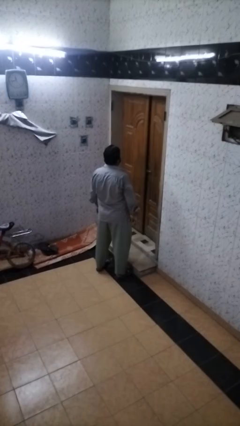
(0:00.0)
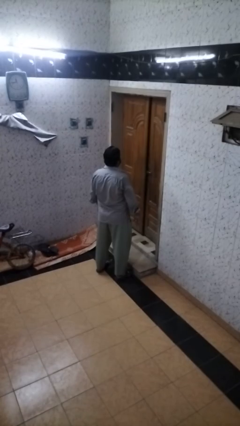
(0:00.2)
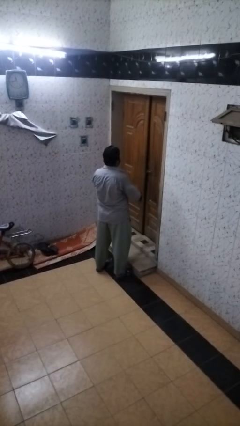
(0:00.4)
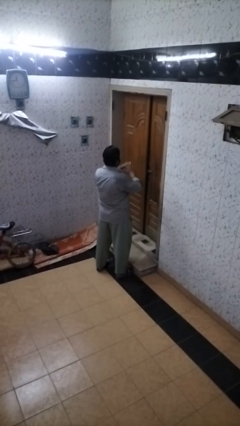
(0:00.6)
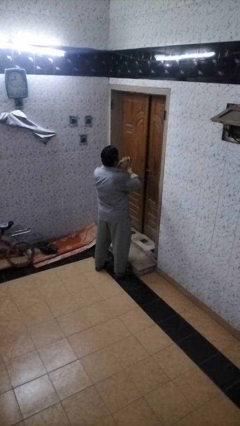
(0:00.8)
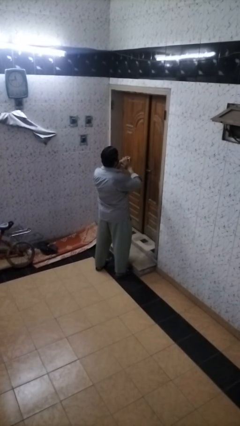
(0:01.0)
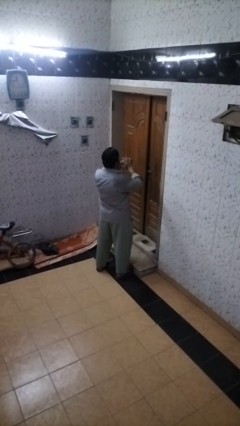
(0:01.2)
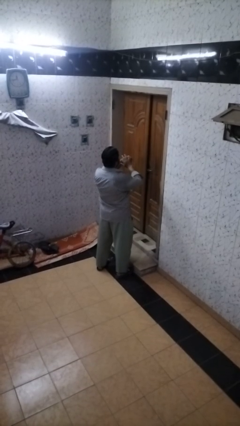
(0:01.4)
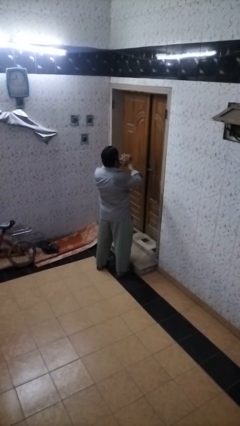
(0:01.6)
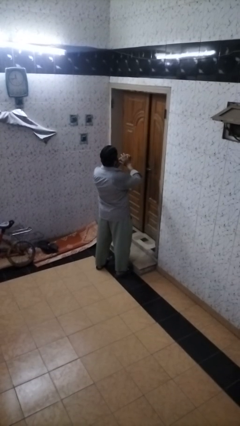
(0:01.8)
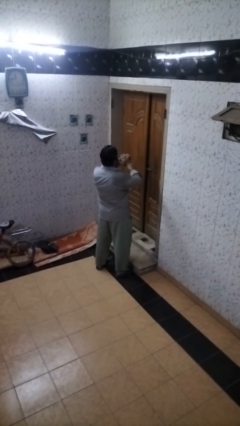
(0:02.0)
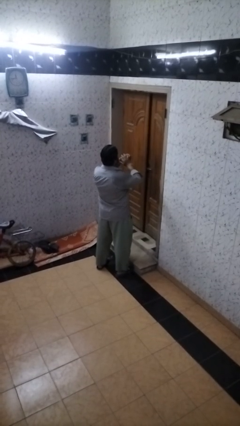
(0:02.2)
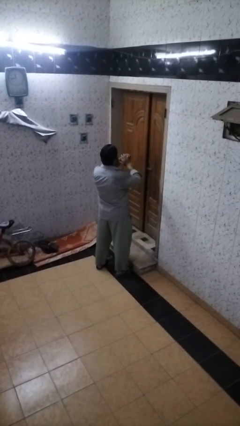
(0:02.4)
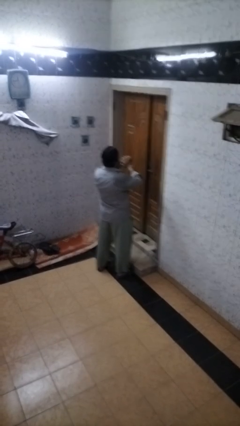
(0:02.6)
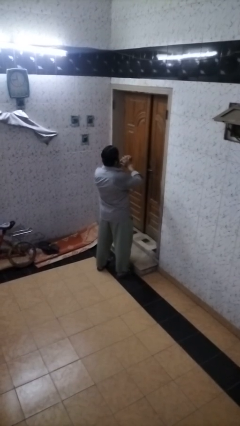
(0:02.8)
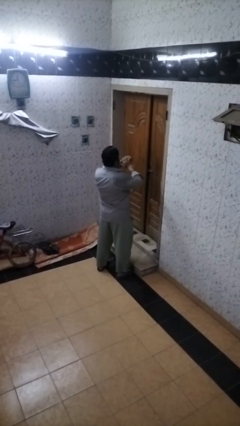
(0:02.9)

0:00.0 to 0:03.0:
person puts on ring

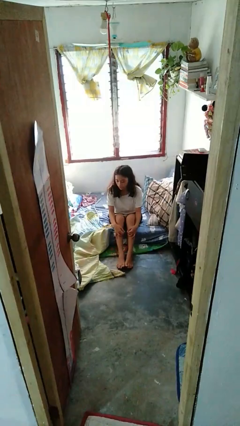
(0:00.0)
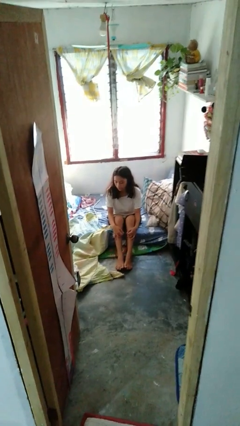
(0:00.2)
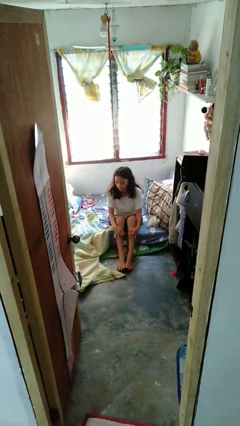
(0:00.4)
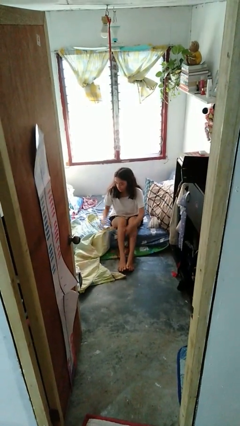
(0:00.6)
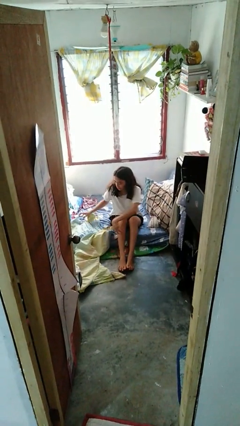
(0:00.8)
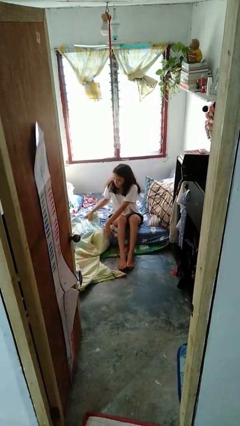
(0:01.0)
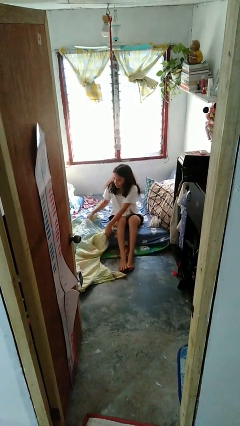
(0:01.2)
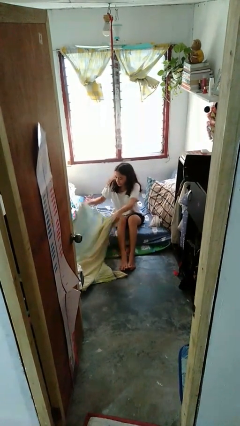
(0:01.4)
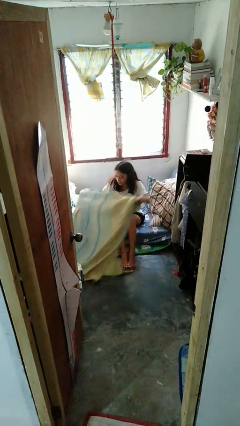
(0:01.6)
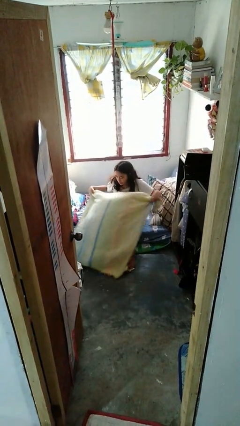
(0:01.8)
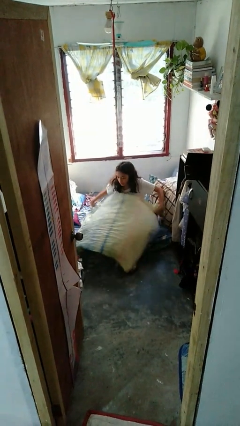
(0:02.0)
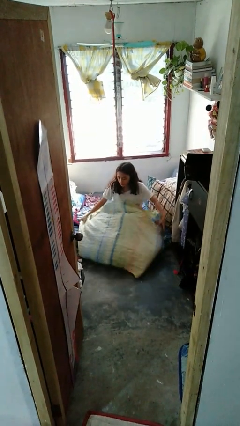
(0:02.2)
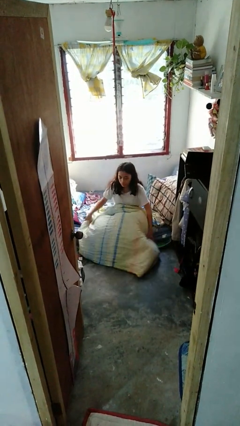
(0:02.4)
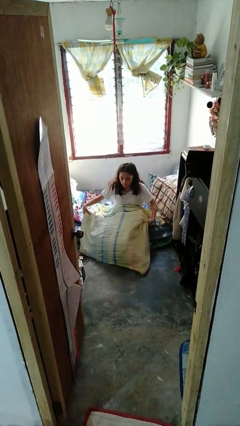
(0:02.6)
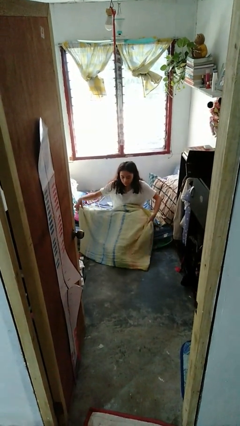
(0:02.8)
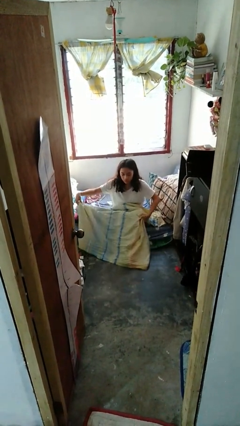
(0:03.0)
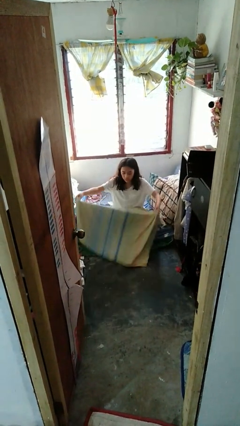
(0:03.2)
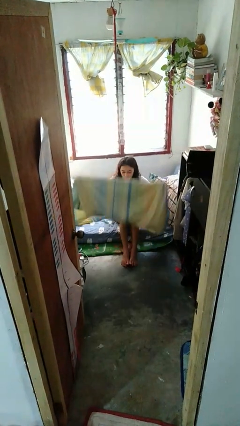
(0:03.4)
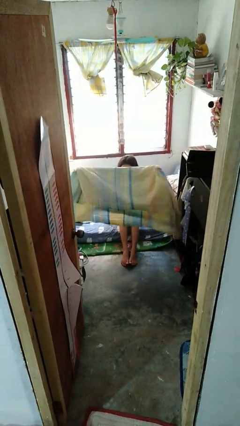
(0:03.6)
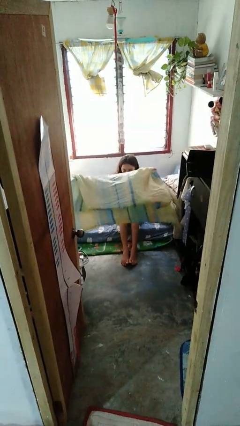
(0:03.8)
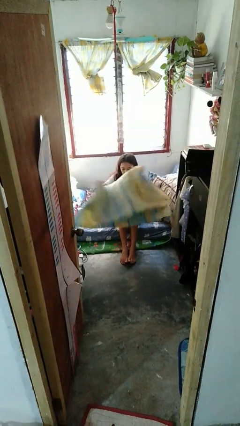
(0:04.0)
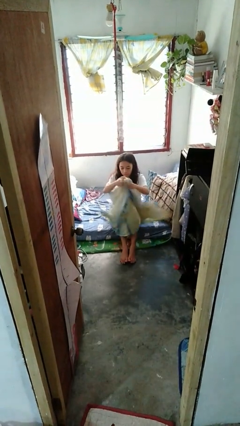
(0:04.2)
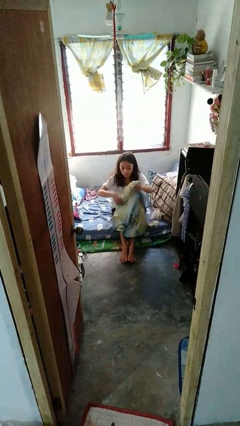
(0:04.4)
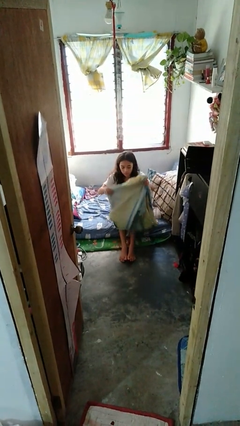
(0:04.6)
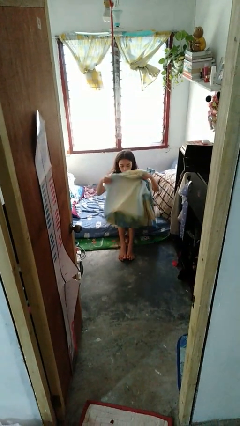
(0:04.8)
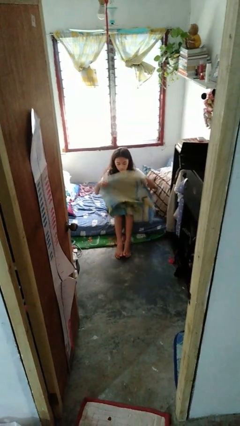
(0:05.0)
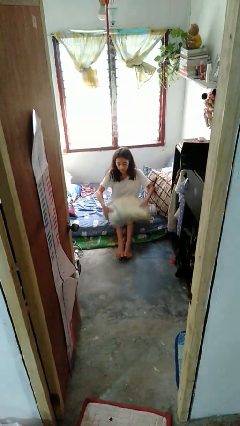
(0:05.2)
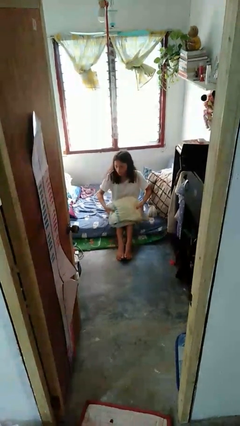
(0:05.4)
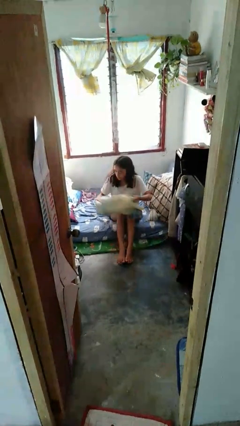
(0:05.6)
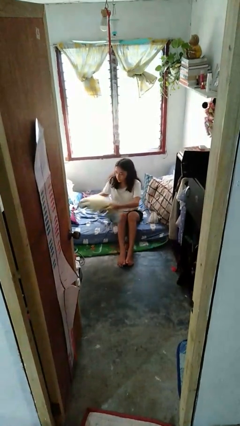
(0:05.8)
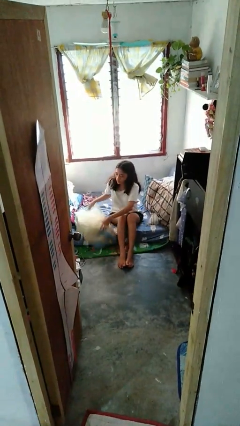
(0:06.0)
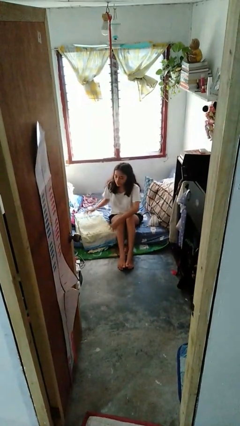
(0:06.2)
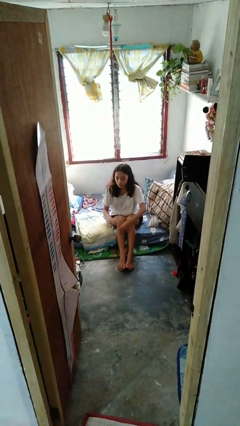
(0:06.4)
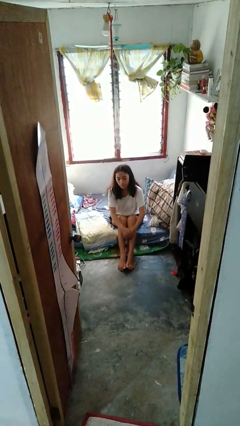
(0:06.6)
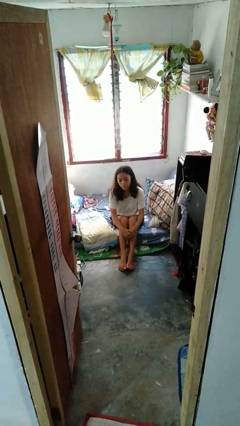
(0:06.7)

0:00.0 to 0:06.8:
person folds blanket

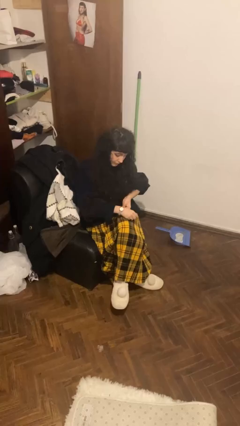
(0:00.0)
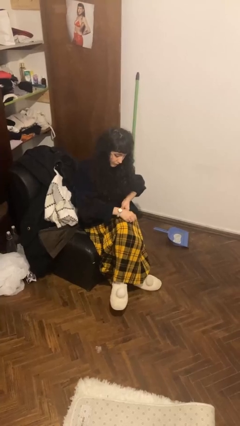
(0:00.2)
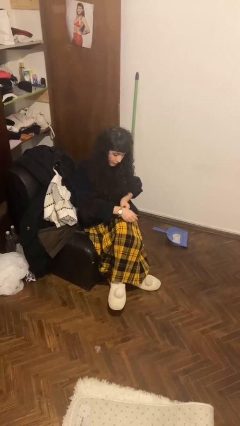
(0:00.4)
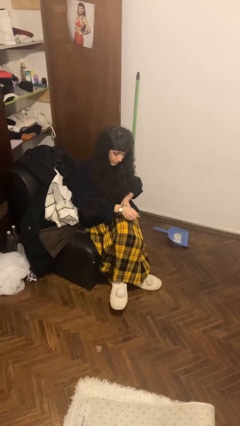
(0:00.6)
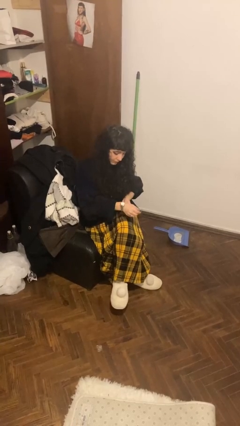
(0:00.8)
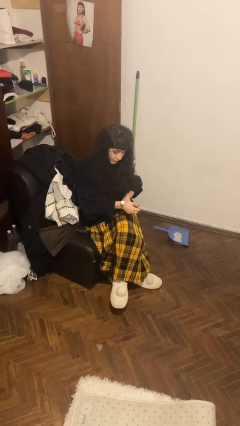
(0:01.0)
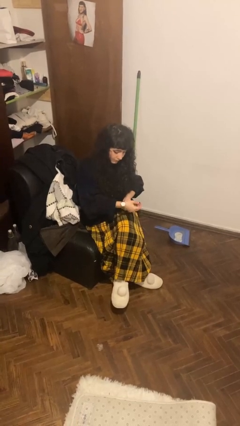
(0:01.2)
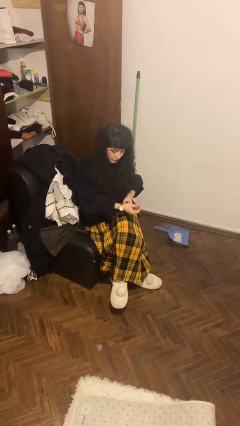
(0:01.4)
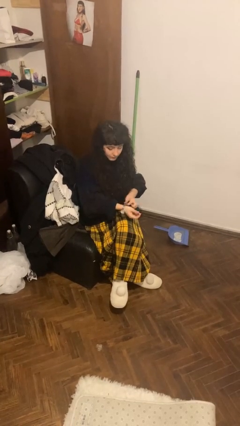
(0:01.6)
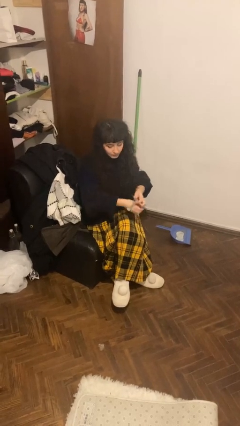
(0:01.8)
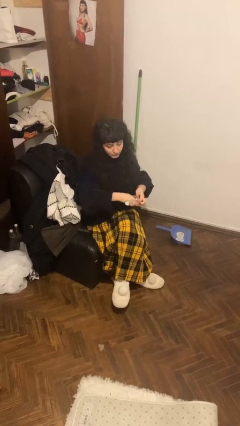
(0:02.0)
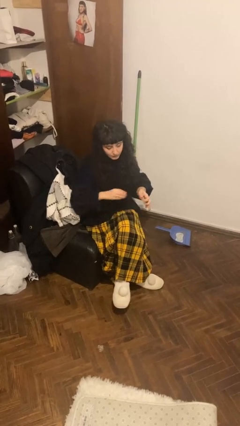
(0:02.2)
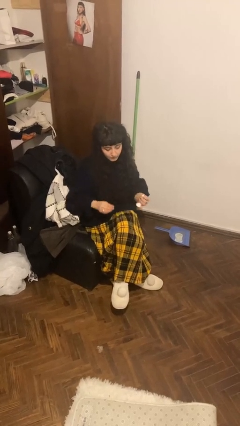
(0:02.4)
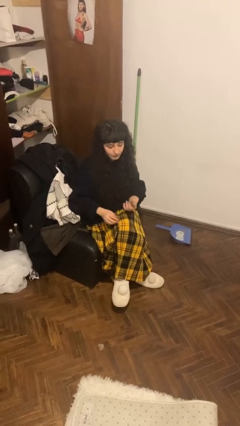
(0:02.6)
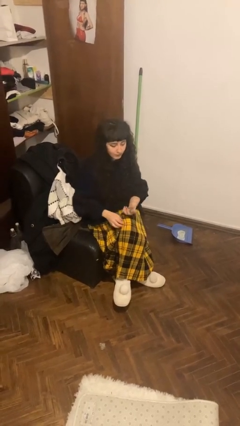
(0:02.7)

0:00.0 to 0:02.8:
person takes off wristwatch

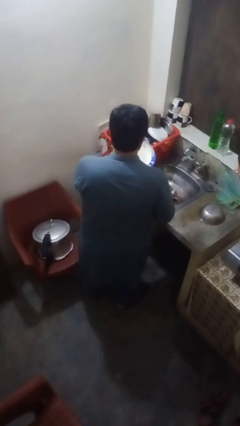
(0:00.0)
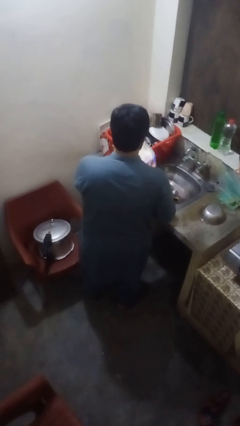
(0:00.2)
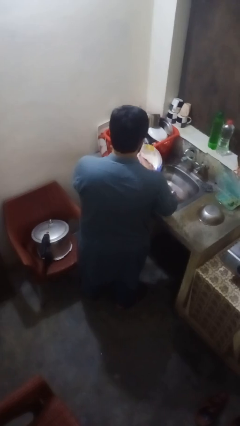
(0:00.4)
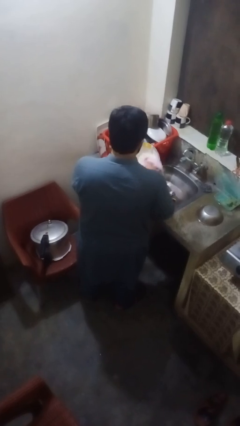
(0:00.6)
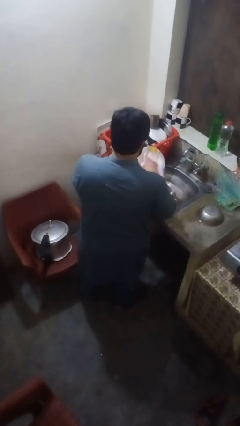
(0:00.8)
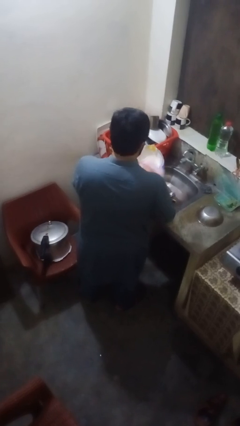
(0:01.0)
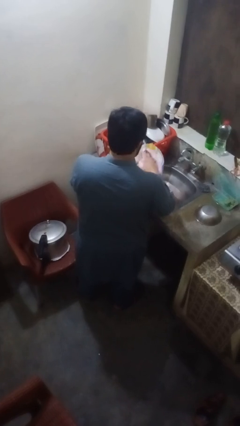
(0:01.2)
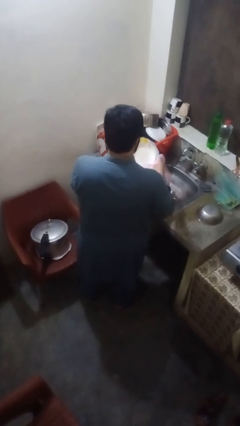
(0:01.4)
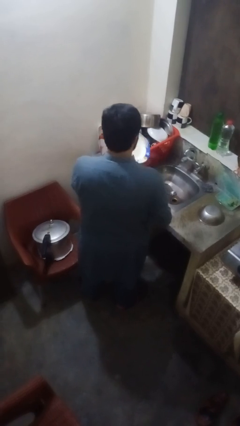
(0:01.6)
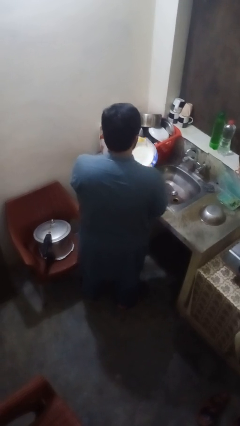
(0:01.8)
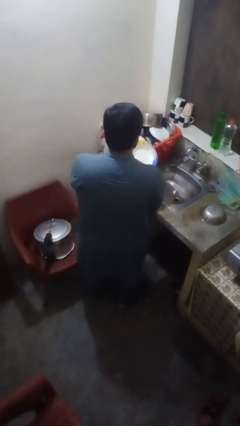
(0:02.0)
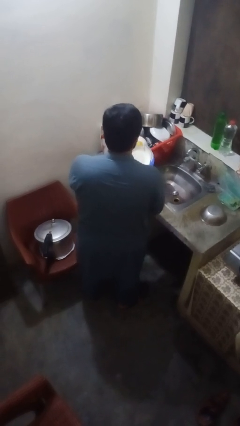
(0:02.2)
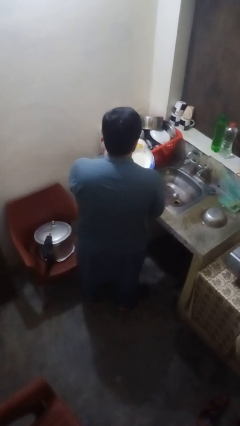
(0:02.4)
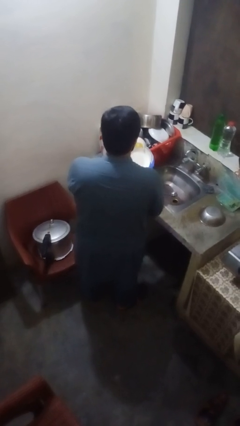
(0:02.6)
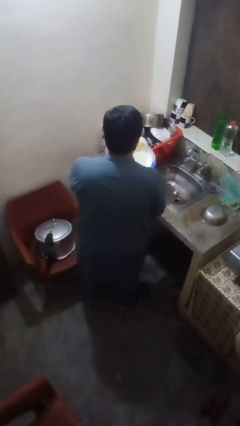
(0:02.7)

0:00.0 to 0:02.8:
person dries dish

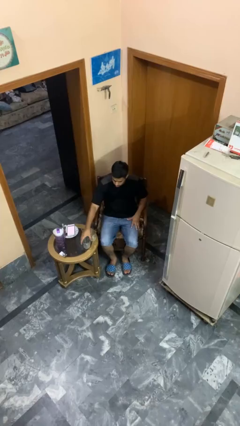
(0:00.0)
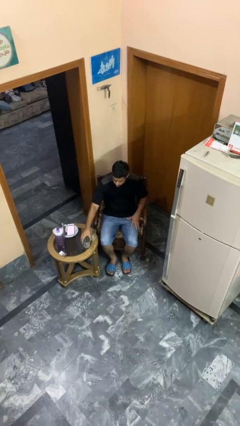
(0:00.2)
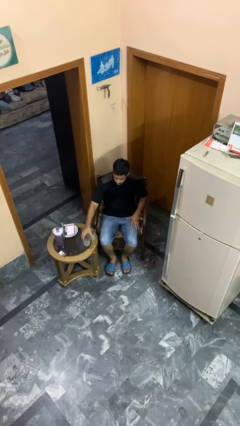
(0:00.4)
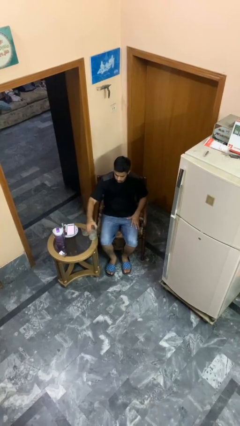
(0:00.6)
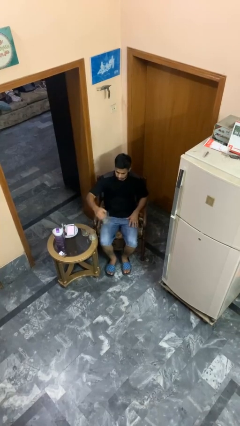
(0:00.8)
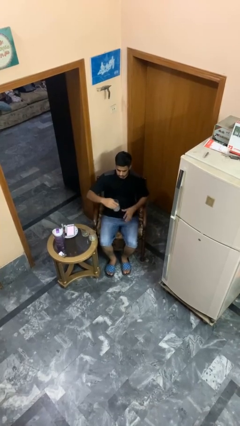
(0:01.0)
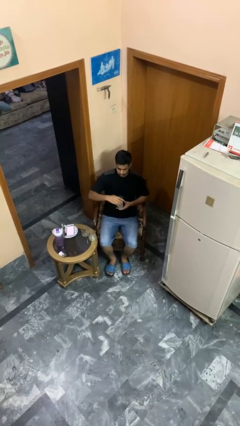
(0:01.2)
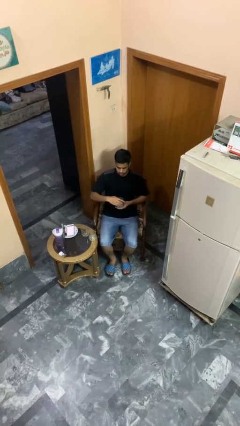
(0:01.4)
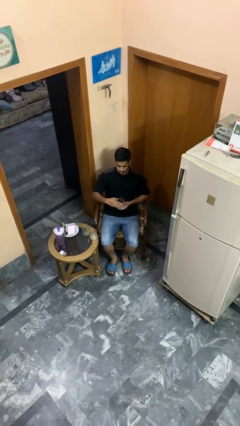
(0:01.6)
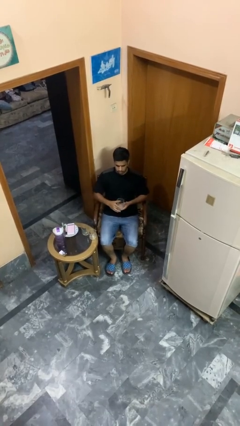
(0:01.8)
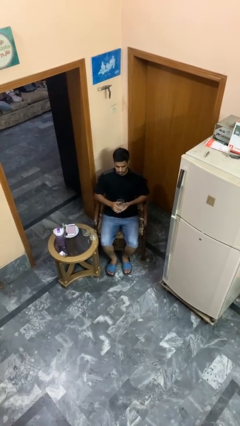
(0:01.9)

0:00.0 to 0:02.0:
person picks up object from table

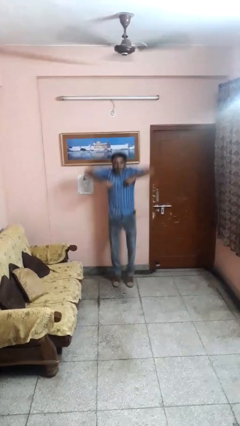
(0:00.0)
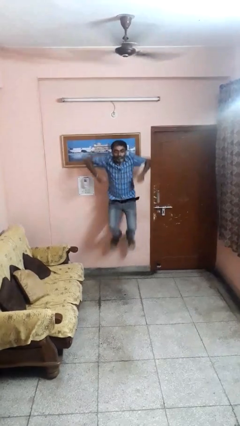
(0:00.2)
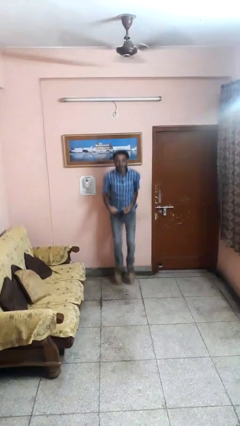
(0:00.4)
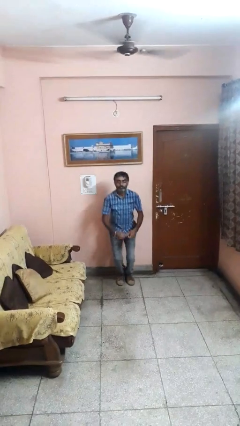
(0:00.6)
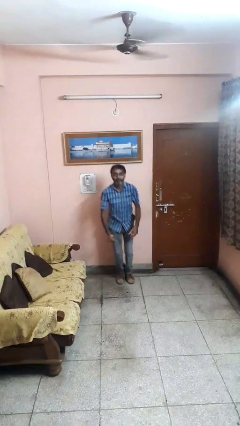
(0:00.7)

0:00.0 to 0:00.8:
person jumps
